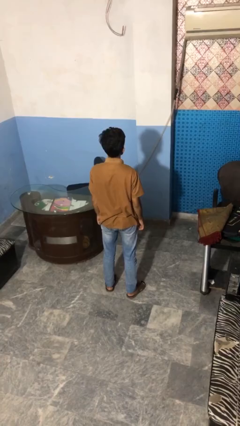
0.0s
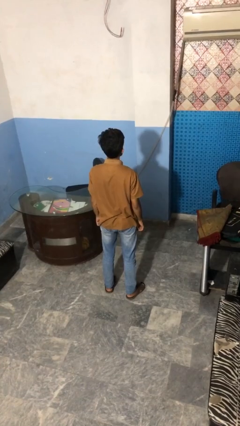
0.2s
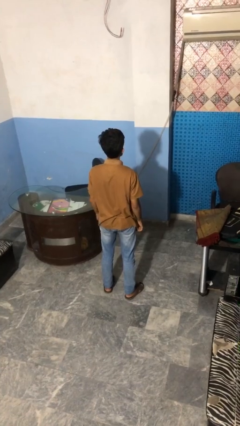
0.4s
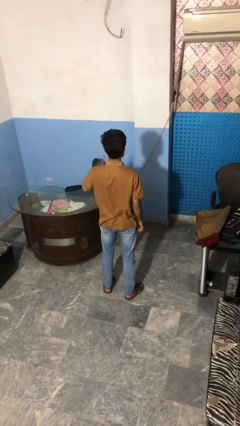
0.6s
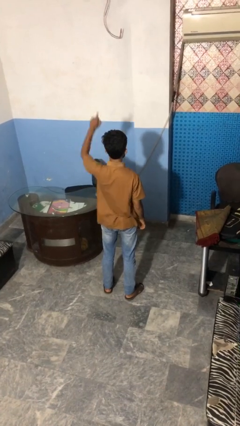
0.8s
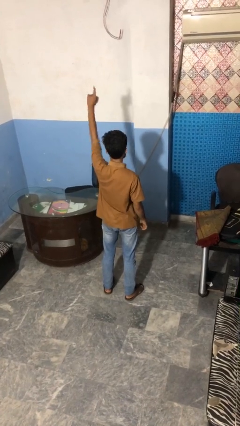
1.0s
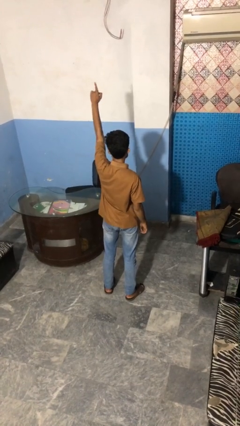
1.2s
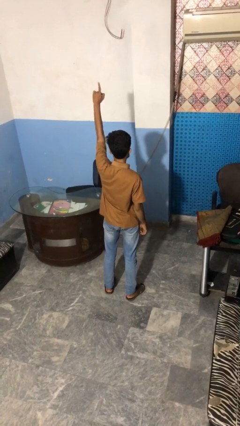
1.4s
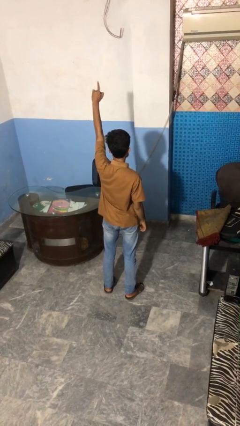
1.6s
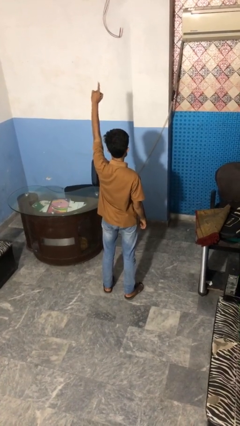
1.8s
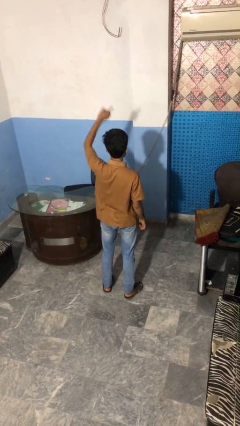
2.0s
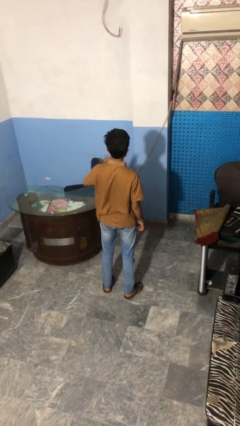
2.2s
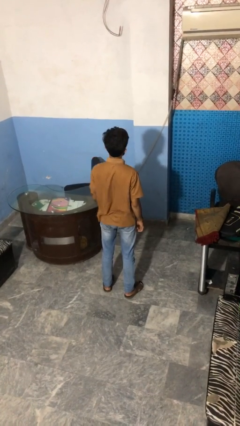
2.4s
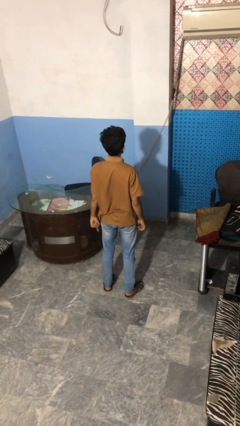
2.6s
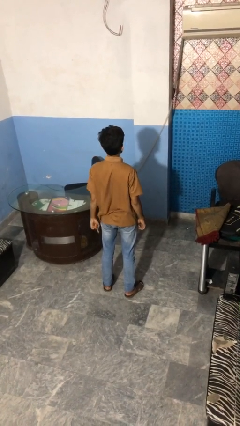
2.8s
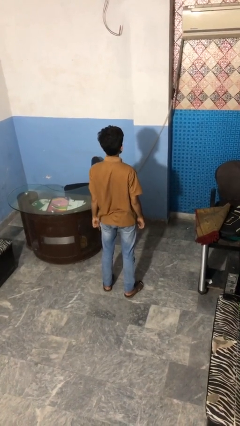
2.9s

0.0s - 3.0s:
person gestures number one

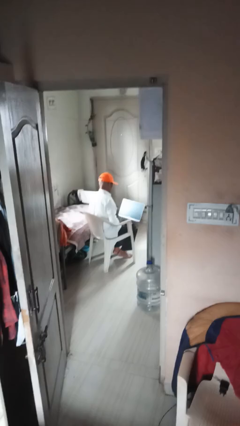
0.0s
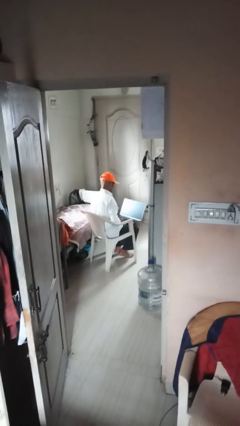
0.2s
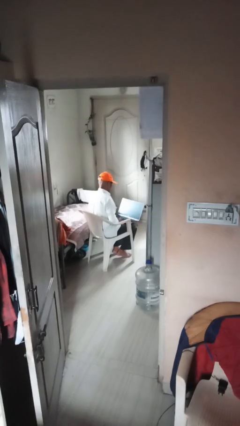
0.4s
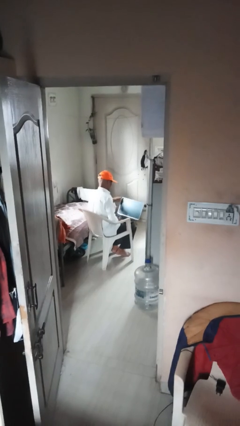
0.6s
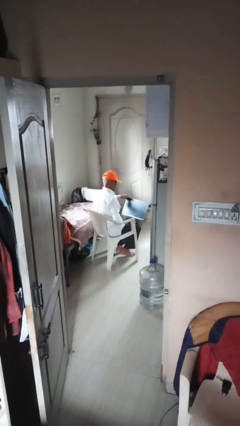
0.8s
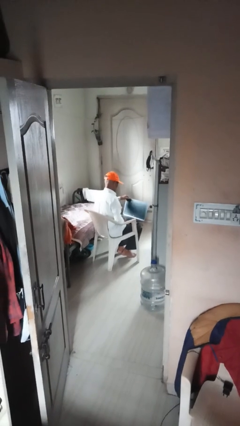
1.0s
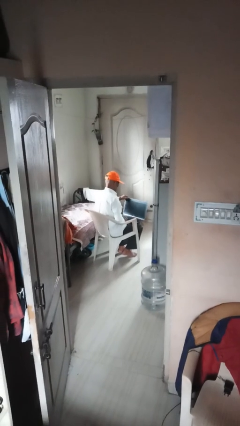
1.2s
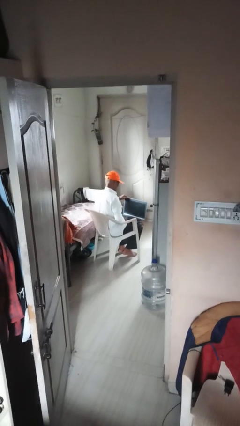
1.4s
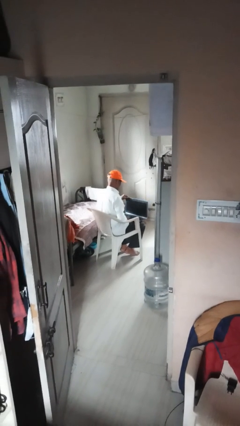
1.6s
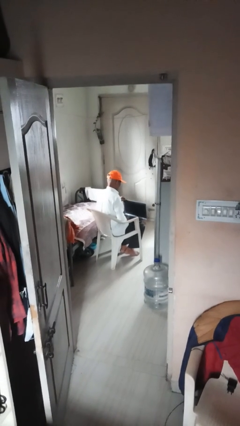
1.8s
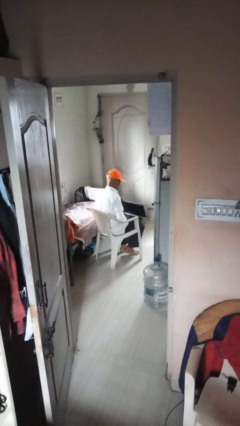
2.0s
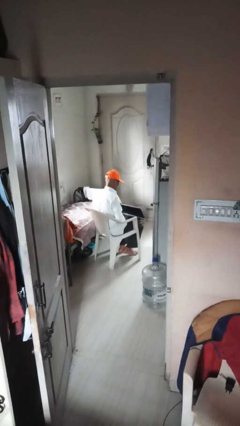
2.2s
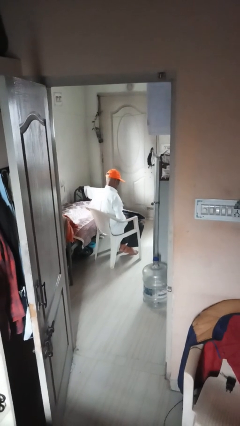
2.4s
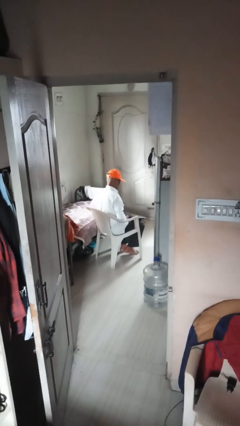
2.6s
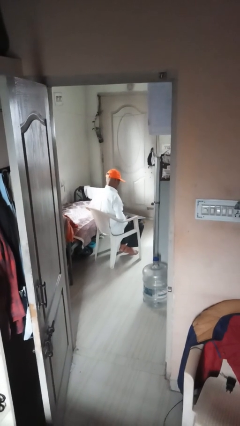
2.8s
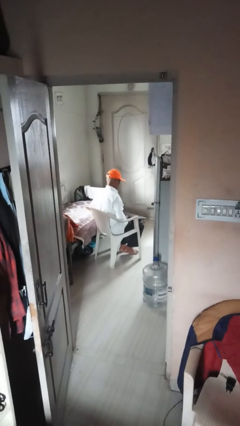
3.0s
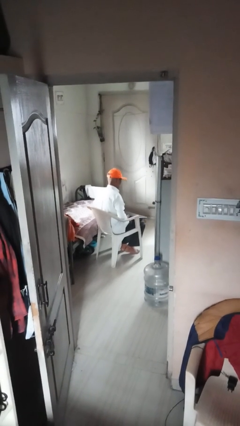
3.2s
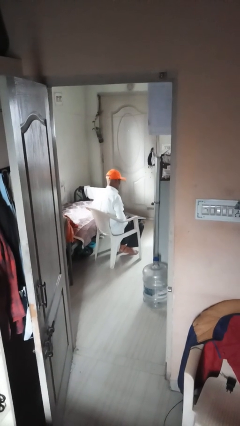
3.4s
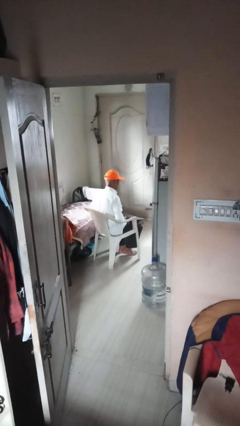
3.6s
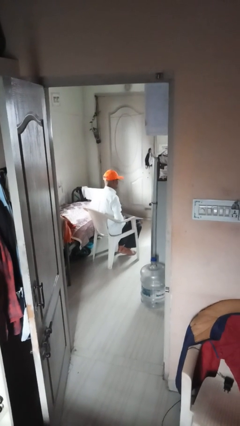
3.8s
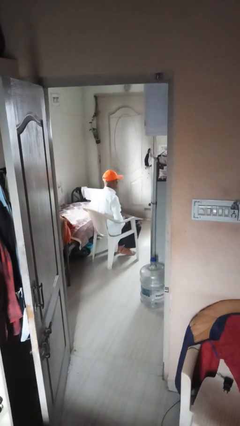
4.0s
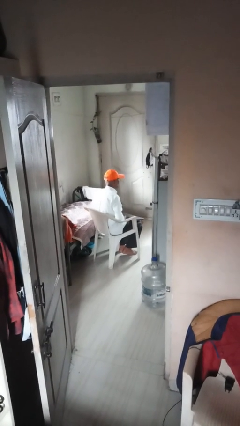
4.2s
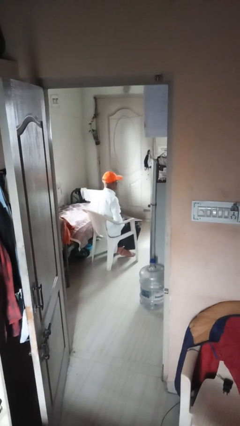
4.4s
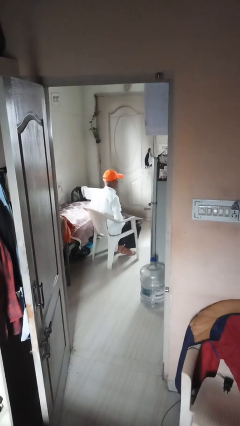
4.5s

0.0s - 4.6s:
person closes laptop

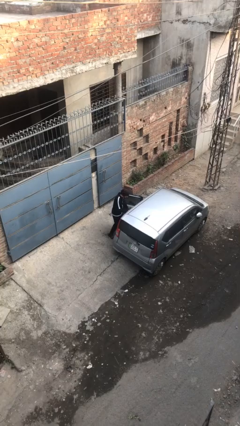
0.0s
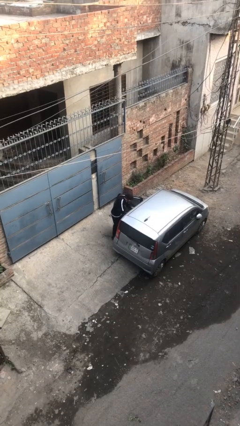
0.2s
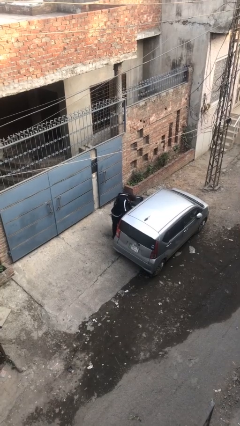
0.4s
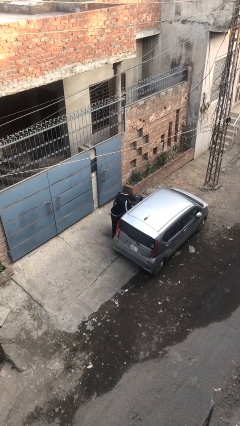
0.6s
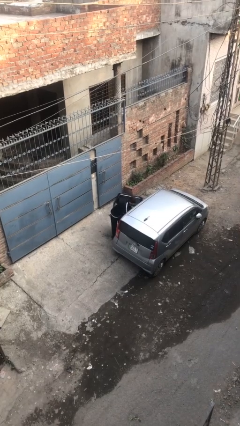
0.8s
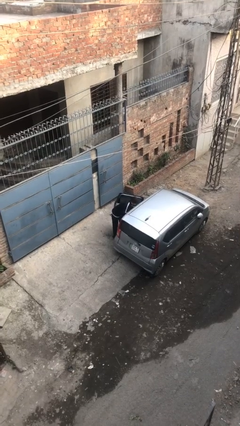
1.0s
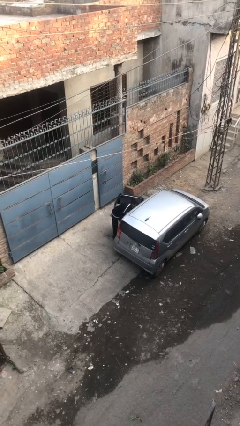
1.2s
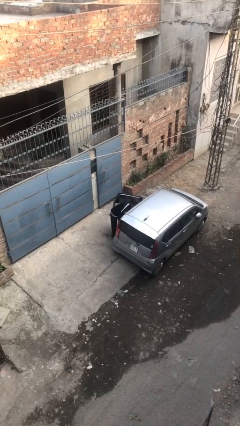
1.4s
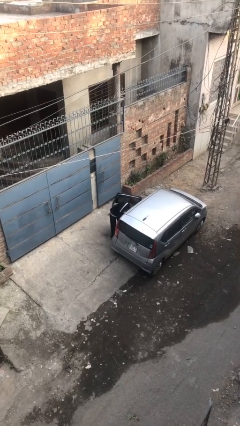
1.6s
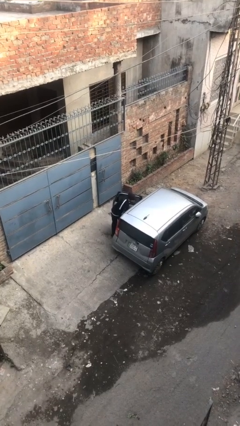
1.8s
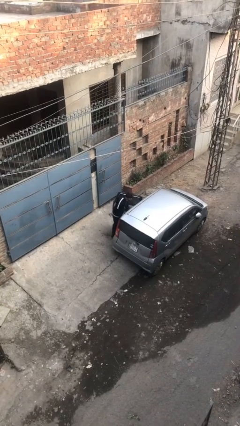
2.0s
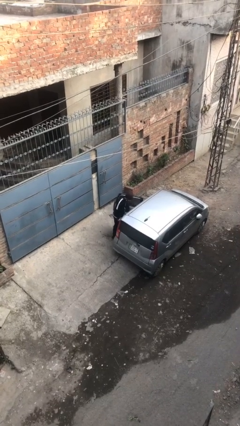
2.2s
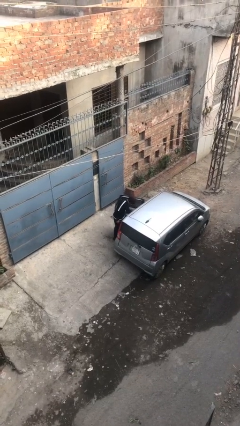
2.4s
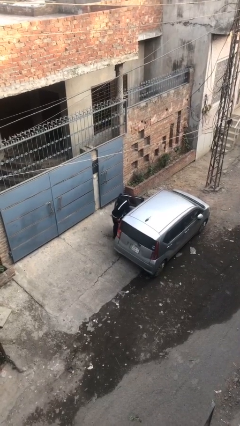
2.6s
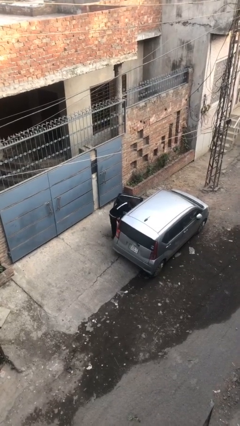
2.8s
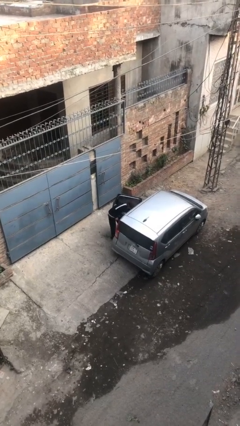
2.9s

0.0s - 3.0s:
person loads car

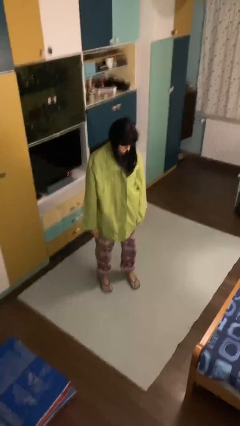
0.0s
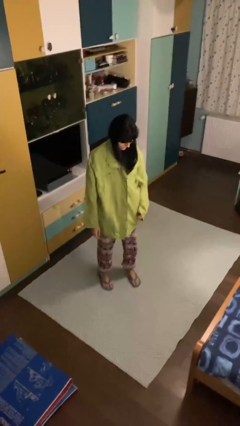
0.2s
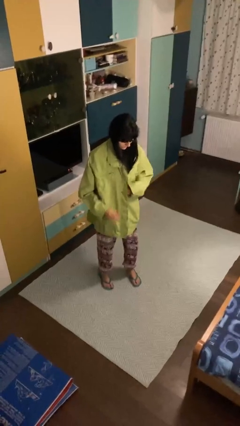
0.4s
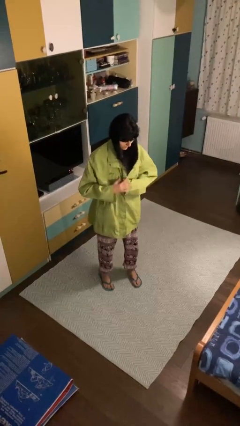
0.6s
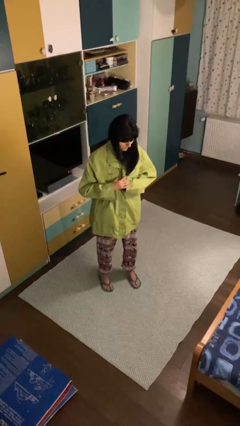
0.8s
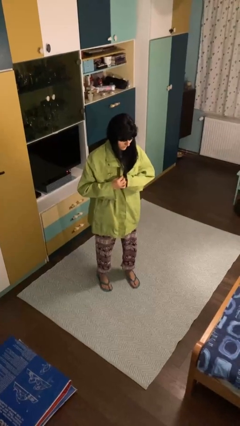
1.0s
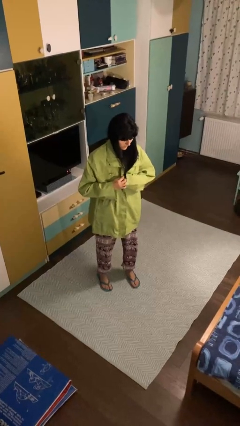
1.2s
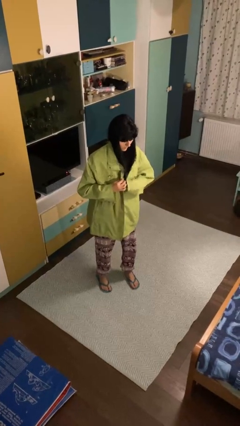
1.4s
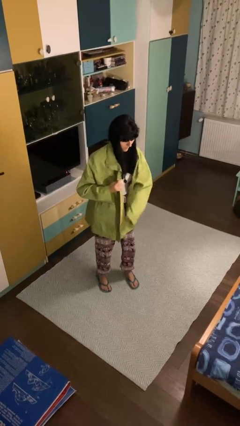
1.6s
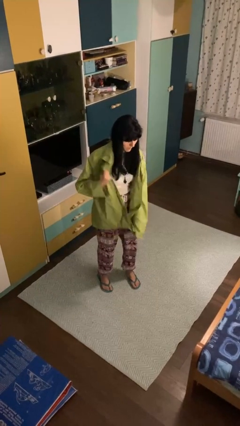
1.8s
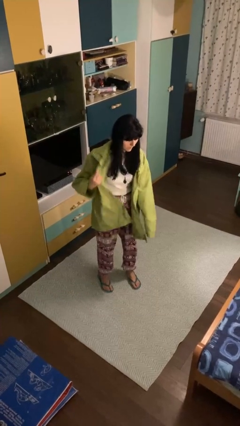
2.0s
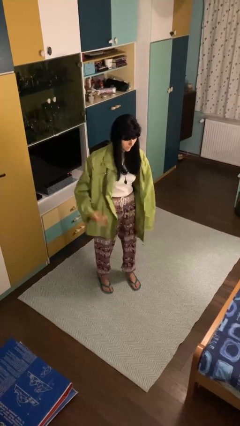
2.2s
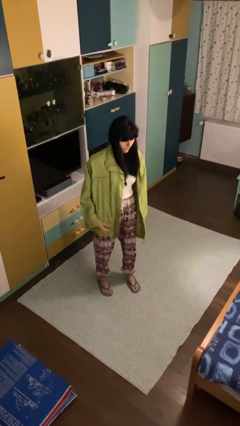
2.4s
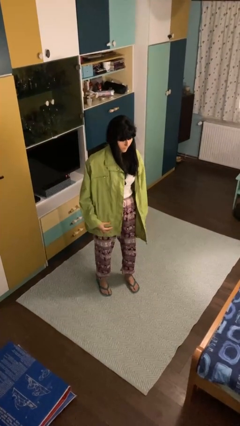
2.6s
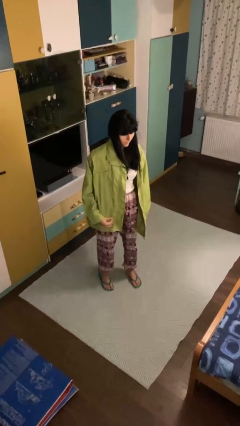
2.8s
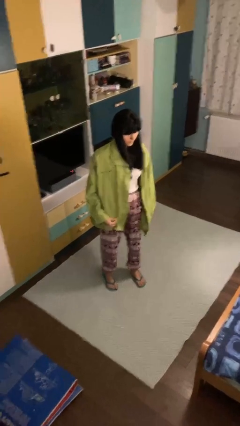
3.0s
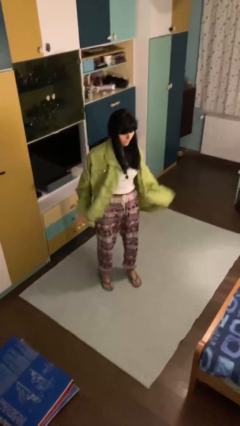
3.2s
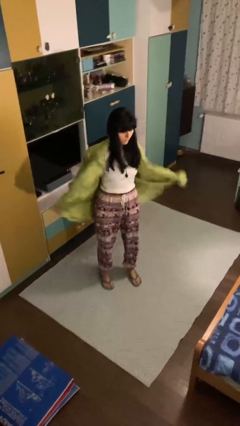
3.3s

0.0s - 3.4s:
person unzips jacket

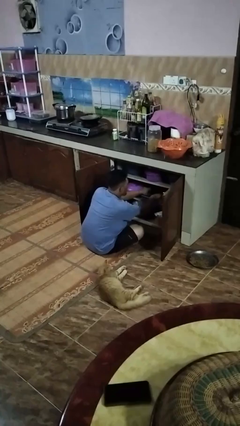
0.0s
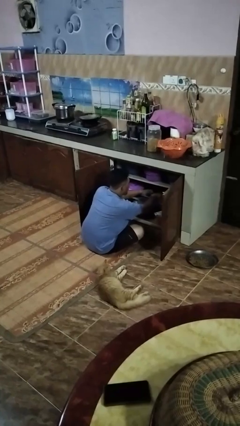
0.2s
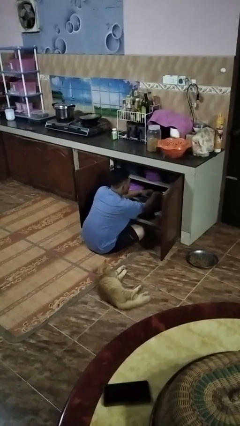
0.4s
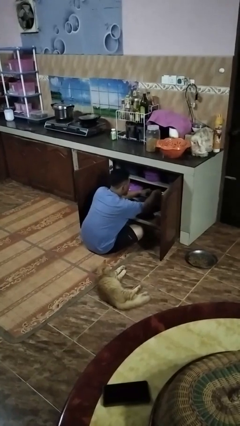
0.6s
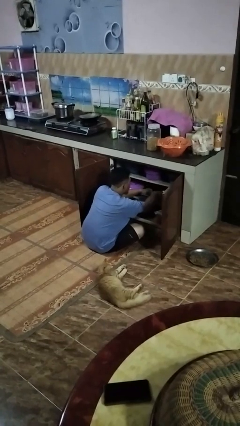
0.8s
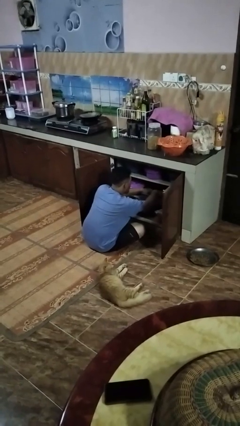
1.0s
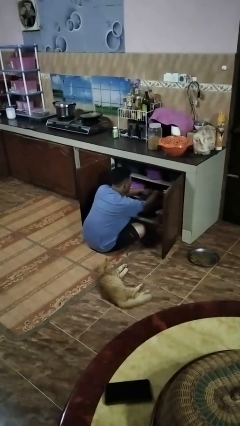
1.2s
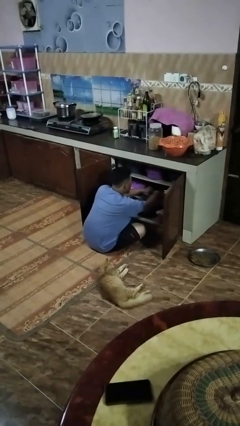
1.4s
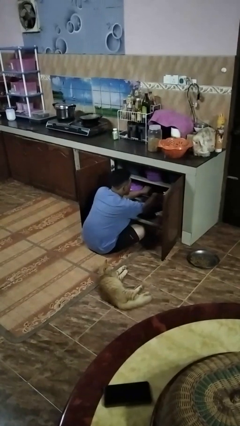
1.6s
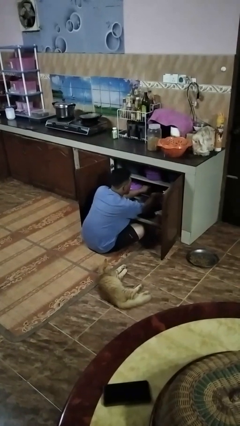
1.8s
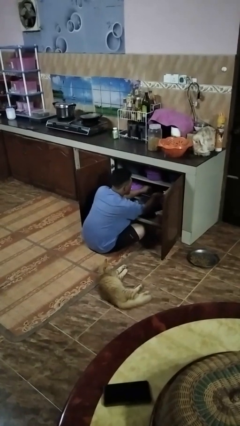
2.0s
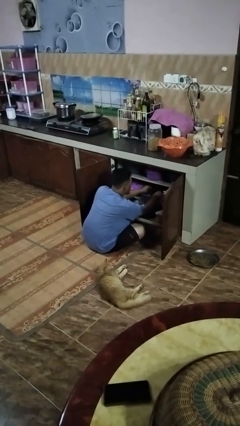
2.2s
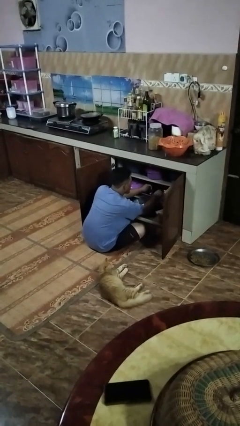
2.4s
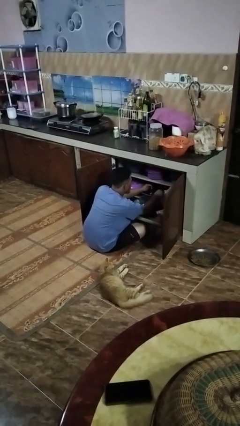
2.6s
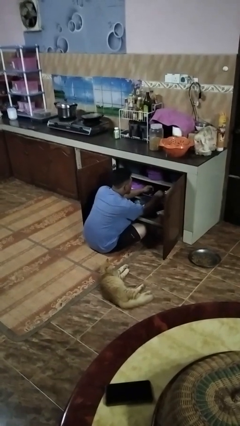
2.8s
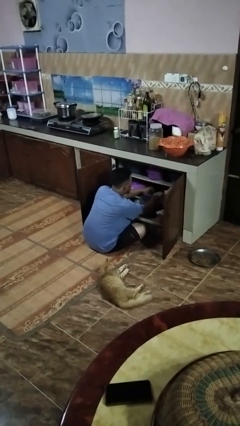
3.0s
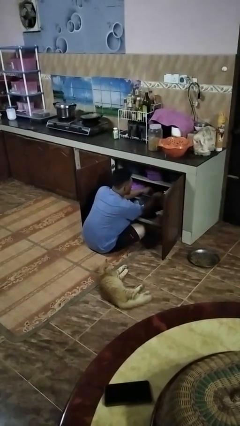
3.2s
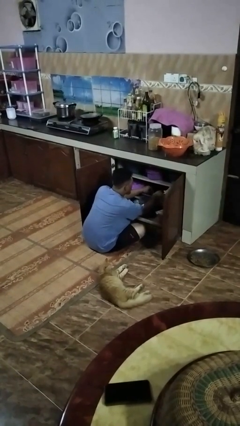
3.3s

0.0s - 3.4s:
person searches in kitchen drawer
